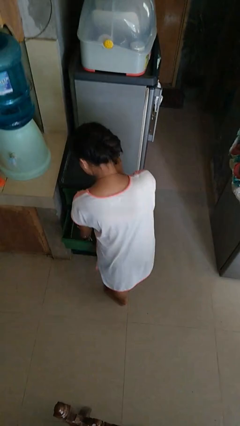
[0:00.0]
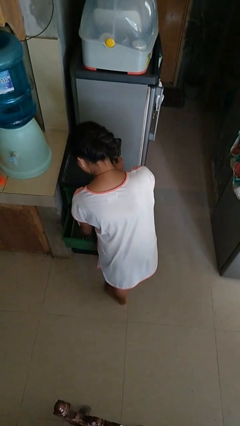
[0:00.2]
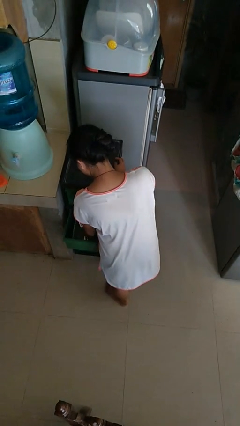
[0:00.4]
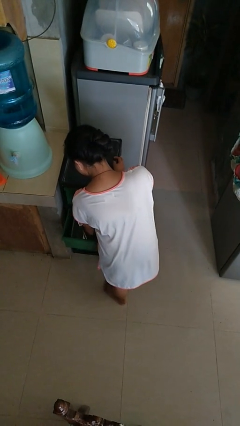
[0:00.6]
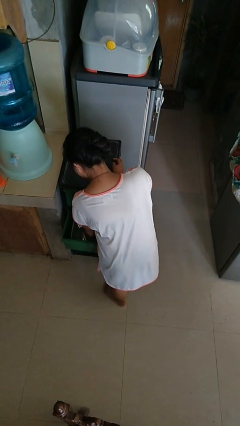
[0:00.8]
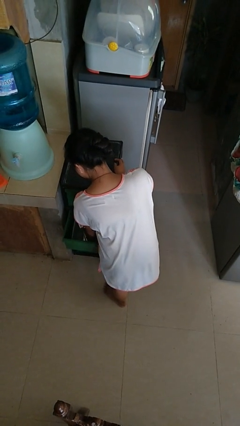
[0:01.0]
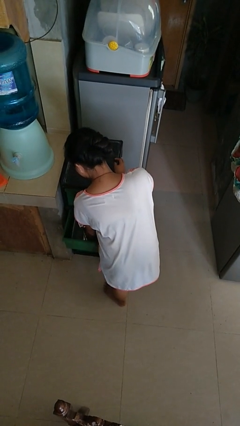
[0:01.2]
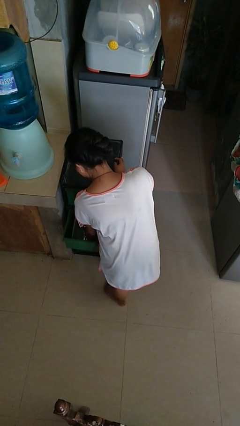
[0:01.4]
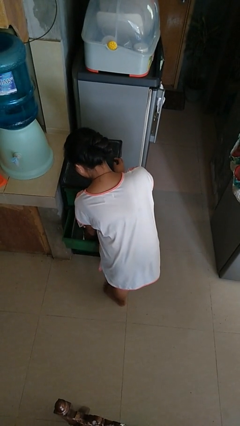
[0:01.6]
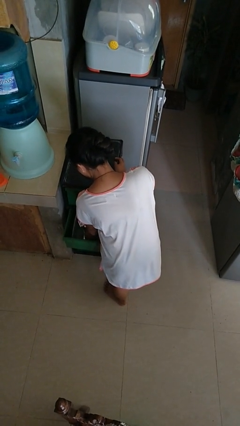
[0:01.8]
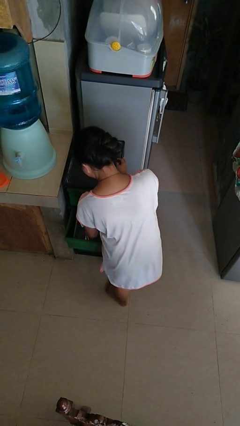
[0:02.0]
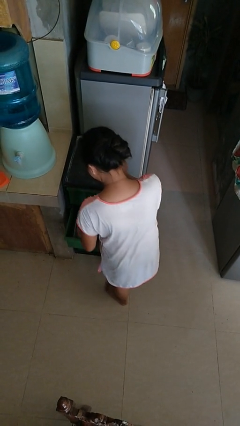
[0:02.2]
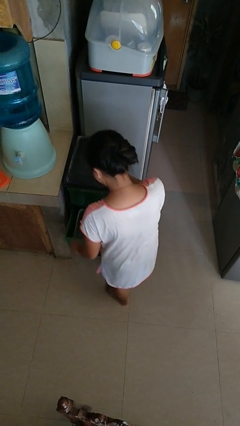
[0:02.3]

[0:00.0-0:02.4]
person puts object into kitchen drawer

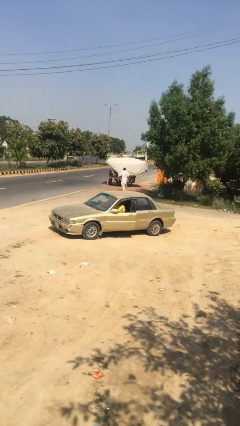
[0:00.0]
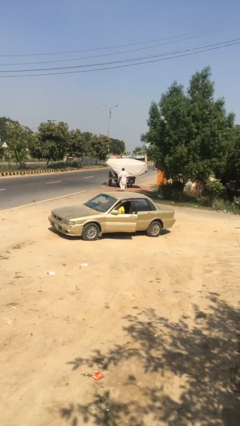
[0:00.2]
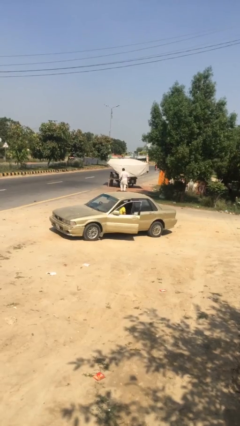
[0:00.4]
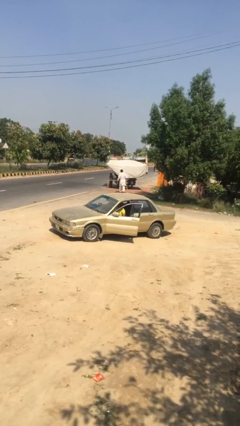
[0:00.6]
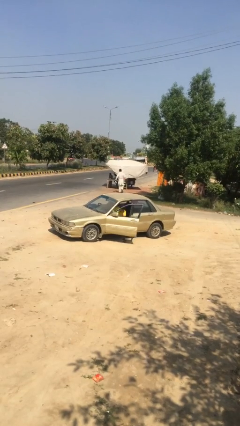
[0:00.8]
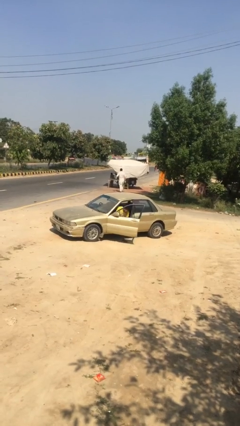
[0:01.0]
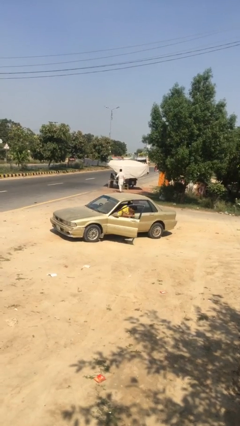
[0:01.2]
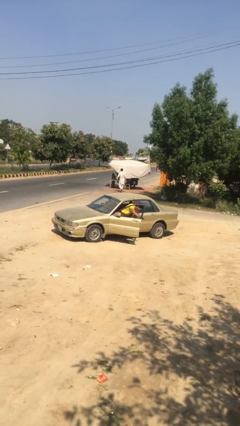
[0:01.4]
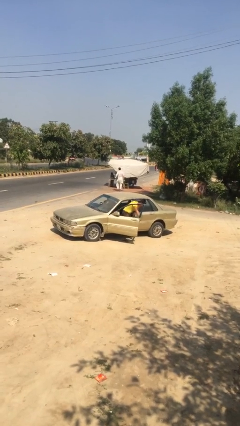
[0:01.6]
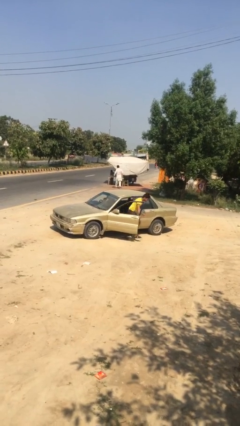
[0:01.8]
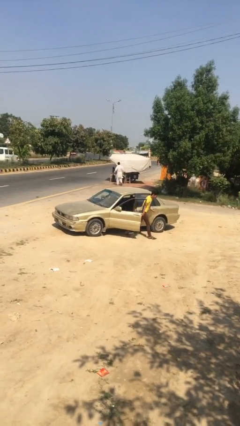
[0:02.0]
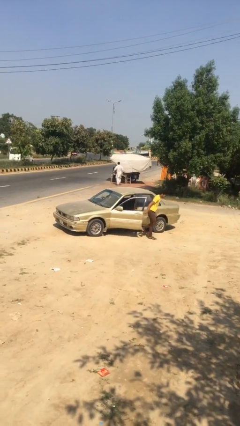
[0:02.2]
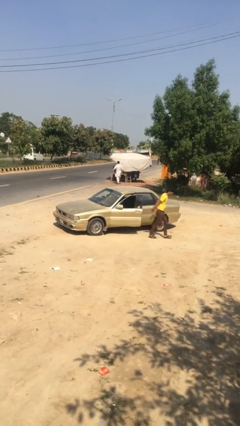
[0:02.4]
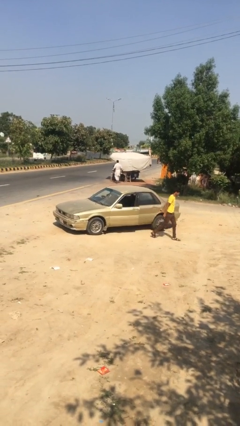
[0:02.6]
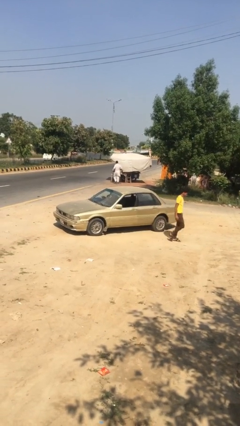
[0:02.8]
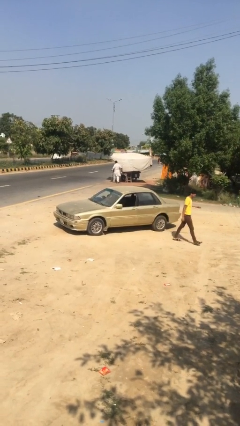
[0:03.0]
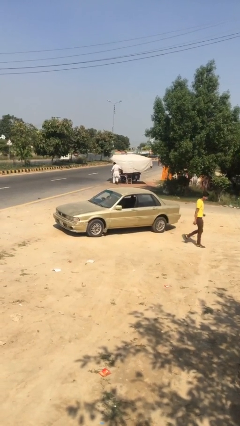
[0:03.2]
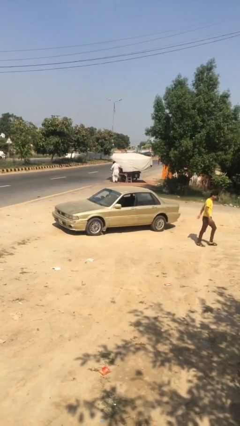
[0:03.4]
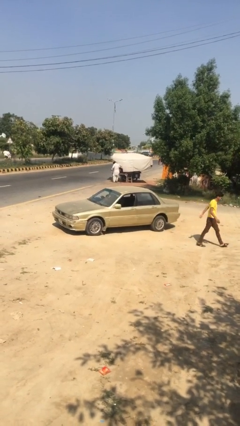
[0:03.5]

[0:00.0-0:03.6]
car drops off person

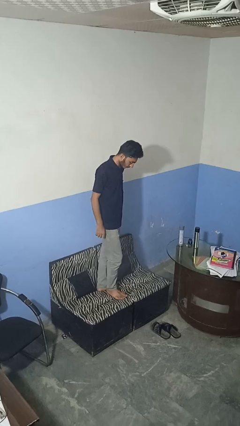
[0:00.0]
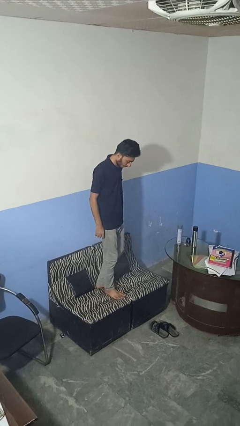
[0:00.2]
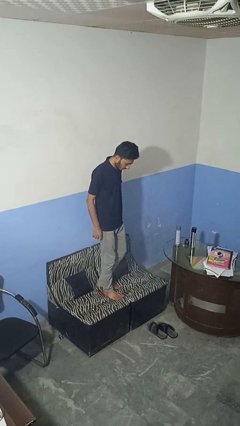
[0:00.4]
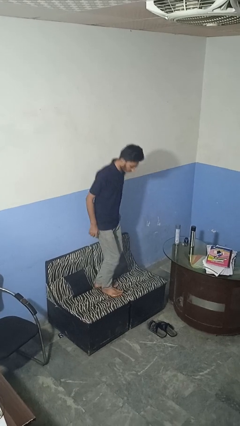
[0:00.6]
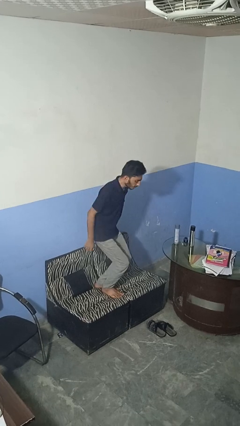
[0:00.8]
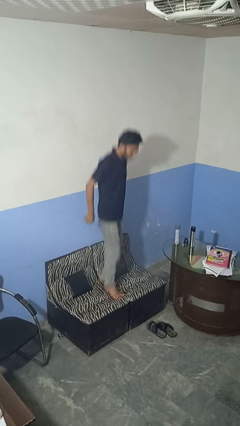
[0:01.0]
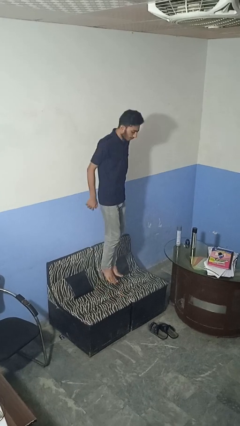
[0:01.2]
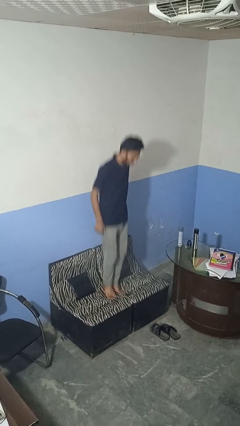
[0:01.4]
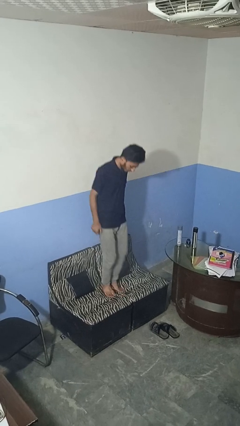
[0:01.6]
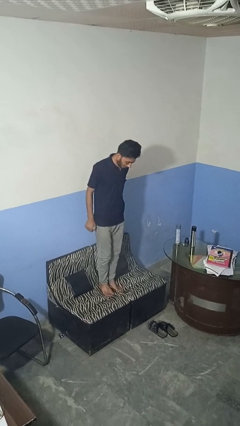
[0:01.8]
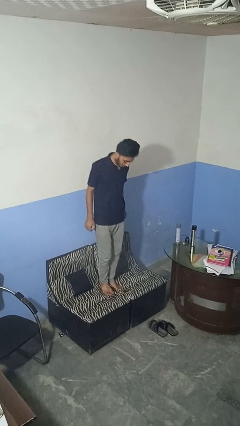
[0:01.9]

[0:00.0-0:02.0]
person jumps on couch

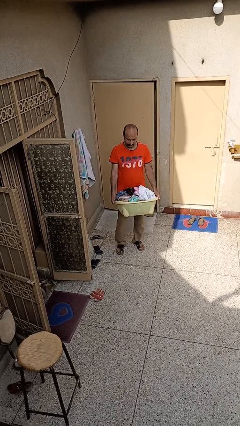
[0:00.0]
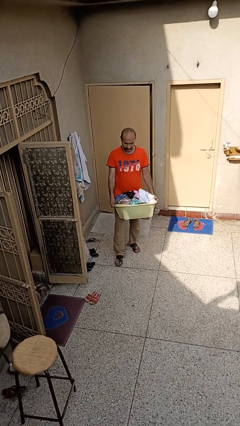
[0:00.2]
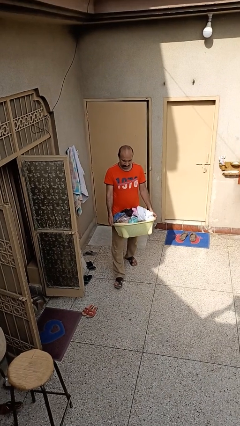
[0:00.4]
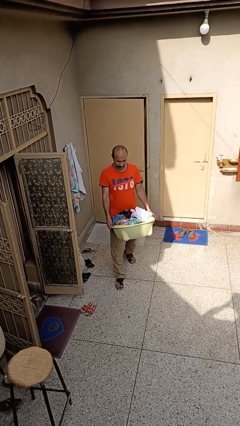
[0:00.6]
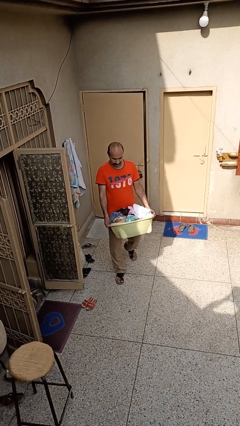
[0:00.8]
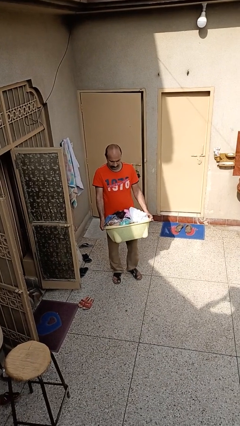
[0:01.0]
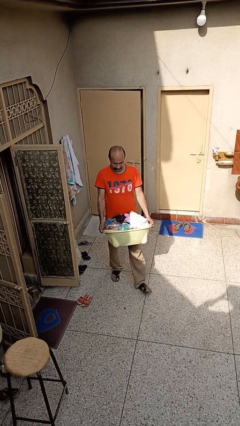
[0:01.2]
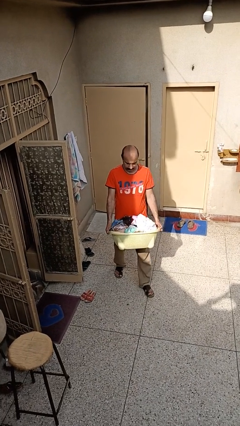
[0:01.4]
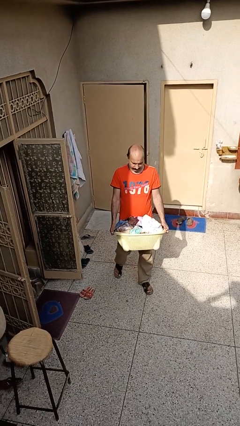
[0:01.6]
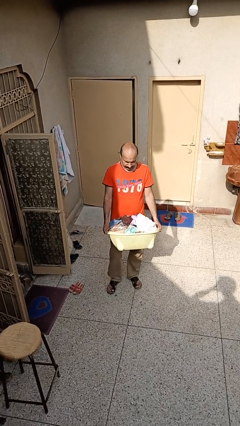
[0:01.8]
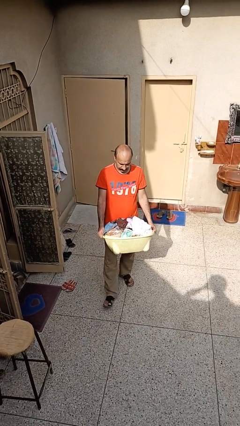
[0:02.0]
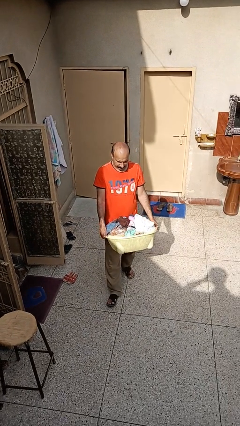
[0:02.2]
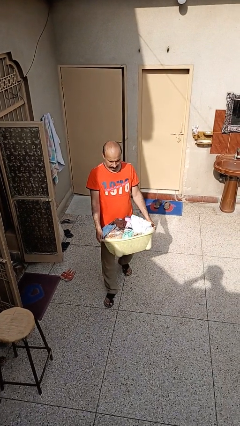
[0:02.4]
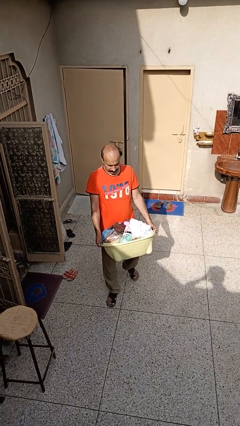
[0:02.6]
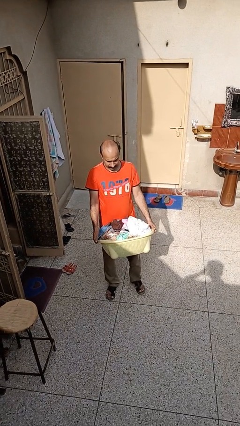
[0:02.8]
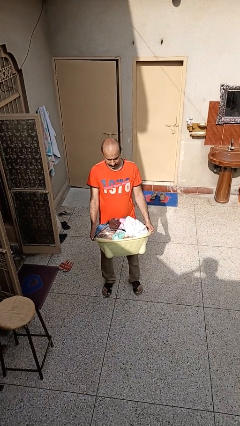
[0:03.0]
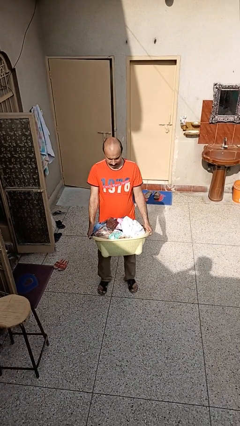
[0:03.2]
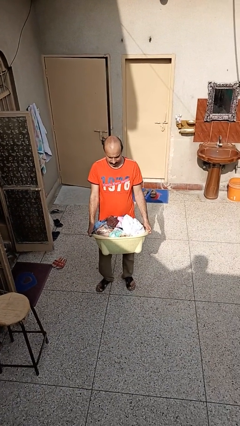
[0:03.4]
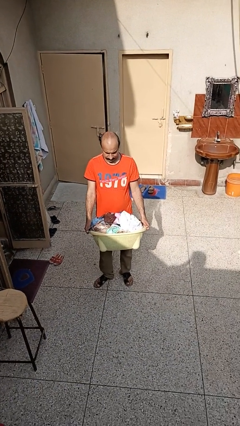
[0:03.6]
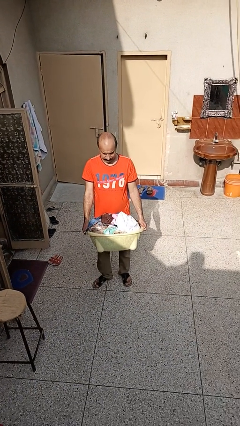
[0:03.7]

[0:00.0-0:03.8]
person carries laundry basket

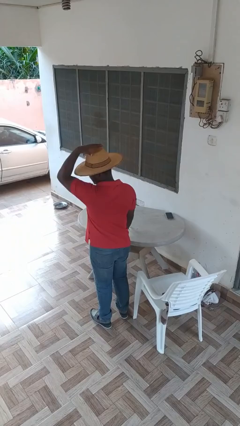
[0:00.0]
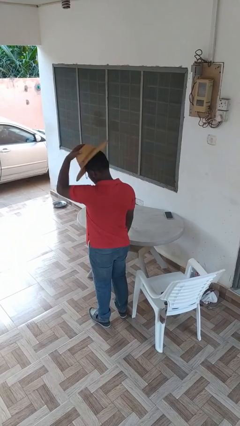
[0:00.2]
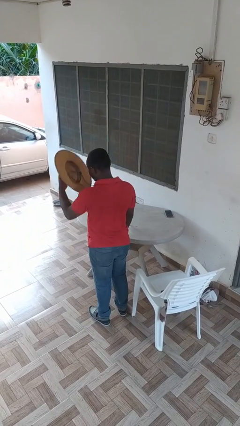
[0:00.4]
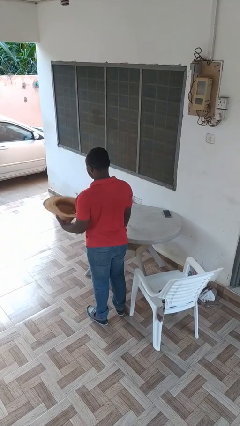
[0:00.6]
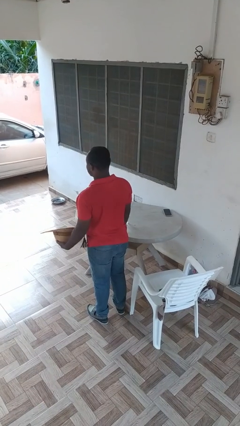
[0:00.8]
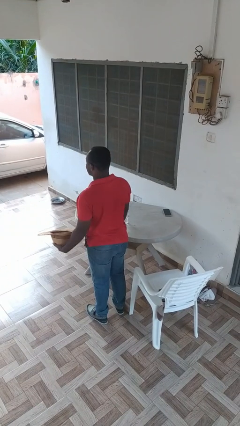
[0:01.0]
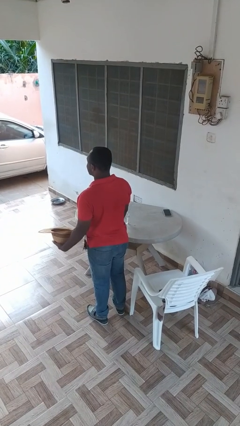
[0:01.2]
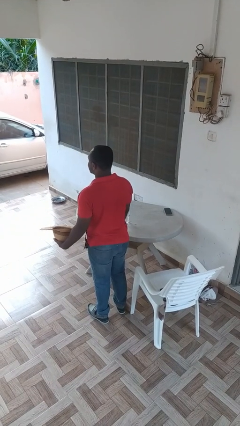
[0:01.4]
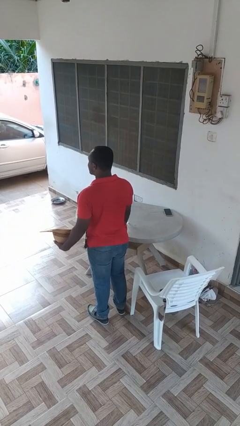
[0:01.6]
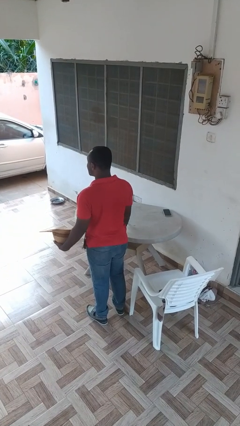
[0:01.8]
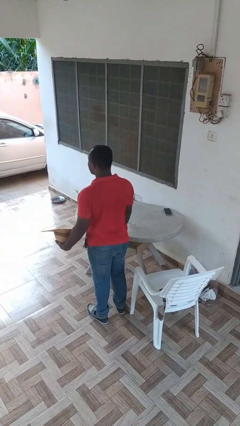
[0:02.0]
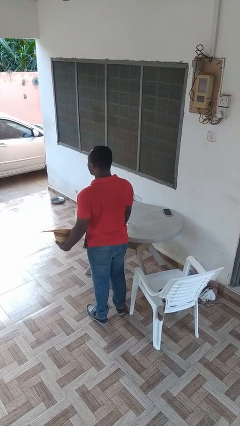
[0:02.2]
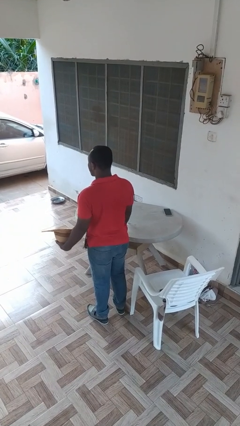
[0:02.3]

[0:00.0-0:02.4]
person takes off hat

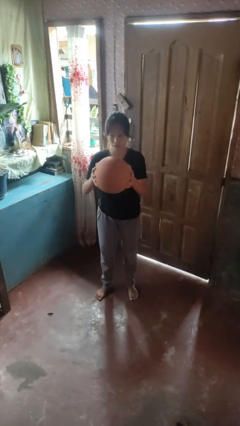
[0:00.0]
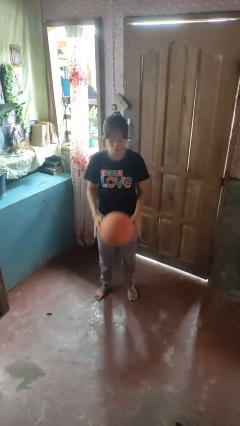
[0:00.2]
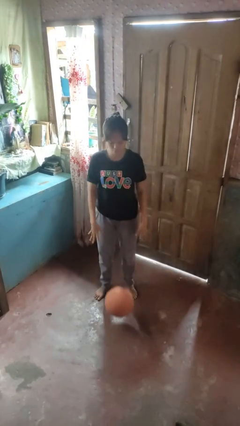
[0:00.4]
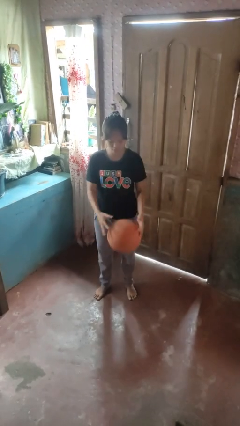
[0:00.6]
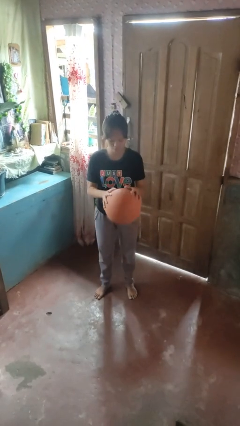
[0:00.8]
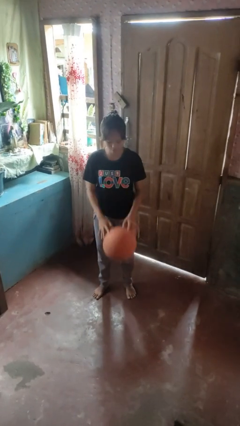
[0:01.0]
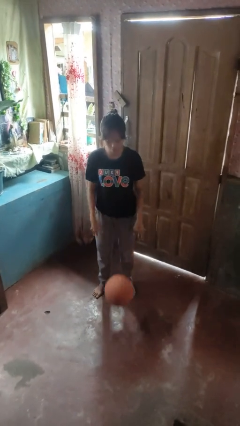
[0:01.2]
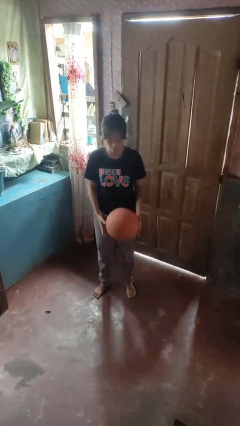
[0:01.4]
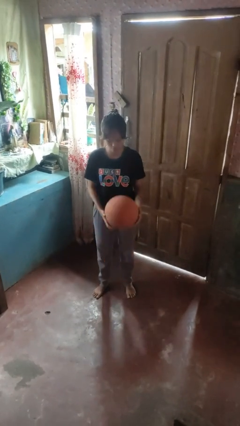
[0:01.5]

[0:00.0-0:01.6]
person bounces ball on floor

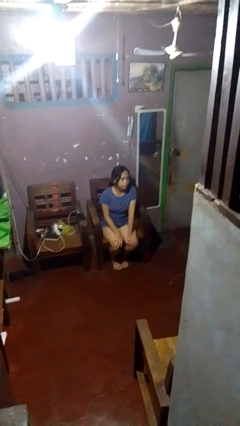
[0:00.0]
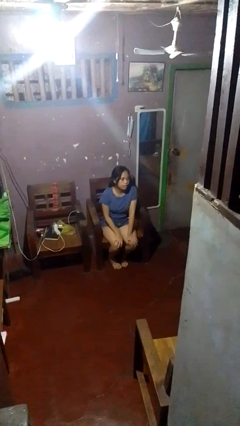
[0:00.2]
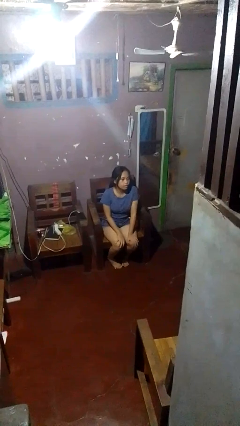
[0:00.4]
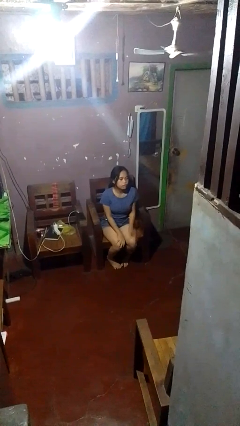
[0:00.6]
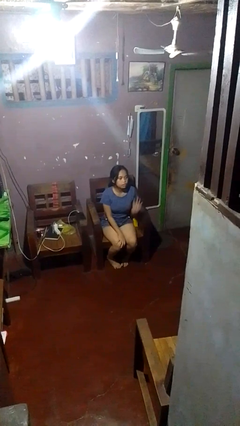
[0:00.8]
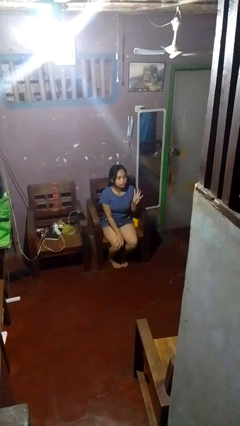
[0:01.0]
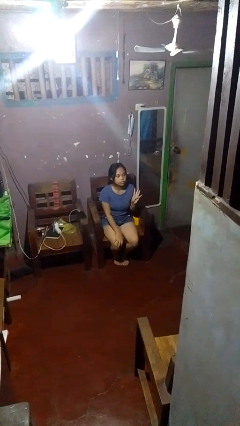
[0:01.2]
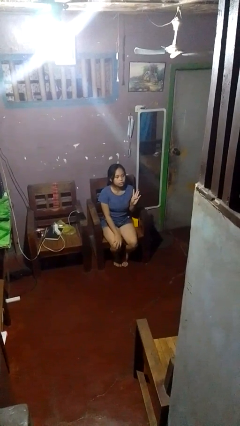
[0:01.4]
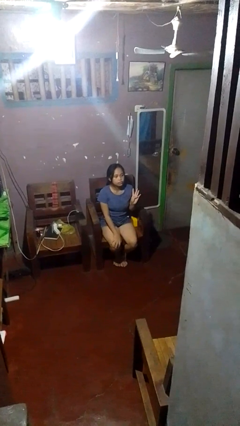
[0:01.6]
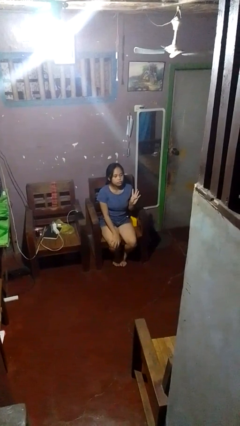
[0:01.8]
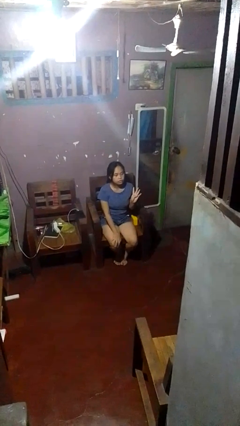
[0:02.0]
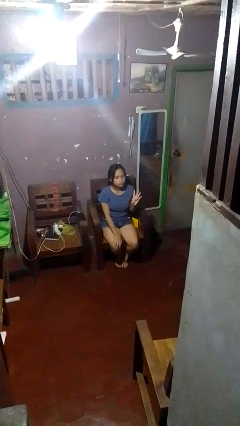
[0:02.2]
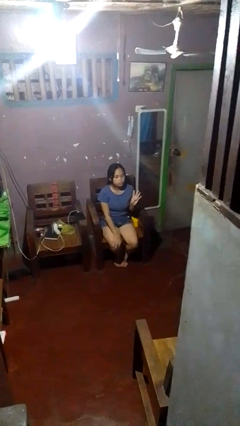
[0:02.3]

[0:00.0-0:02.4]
person gestures number four
